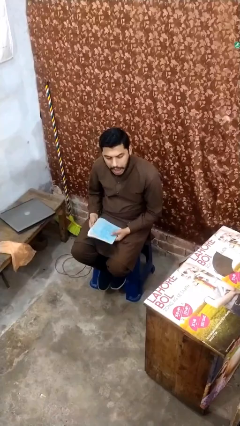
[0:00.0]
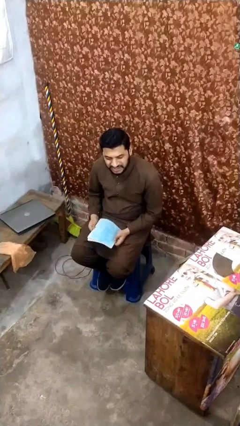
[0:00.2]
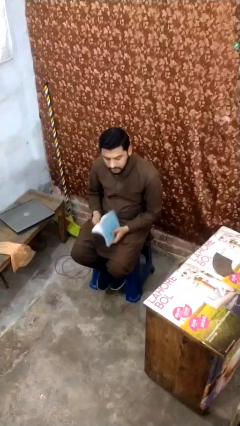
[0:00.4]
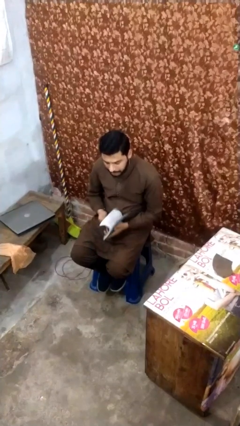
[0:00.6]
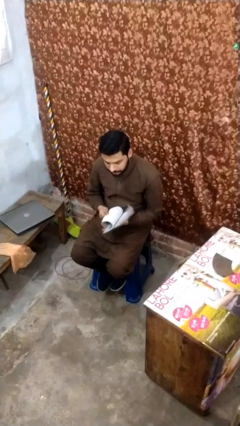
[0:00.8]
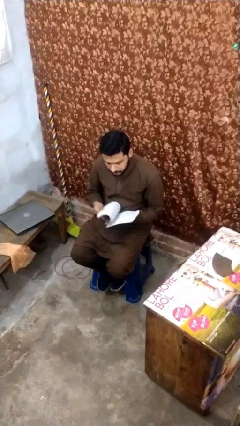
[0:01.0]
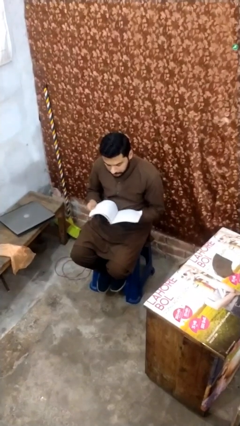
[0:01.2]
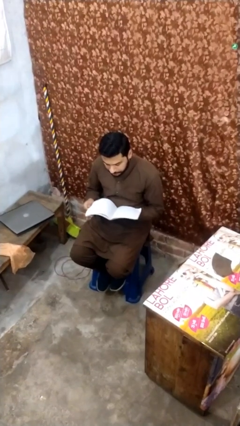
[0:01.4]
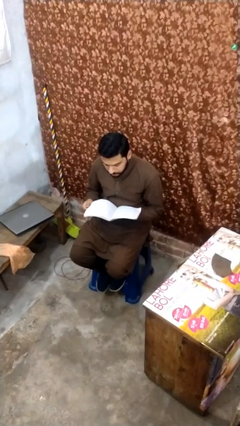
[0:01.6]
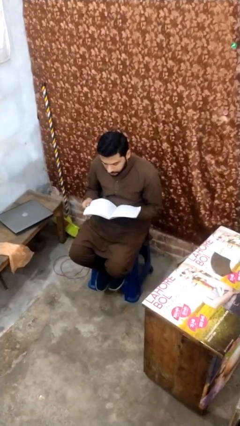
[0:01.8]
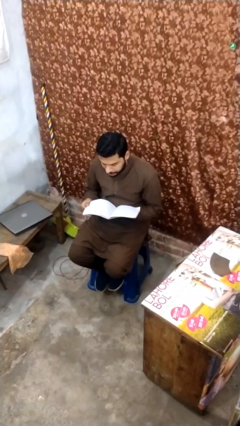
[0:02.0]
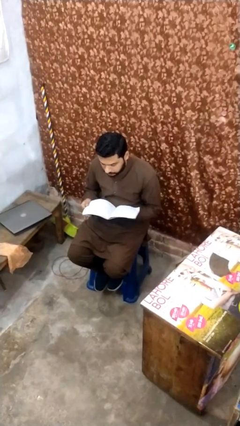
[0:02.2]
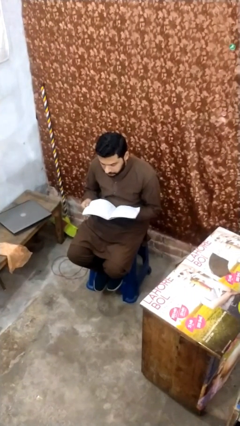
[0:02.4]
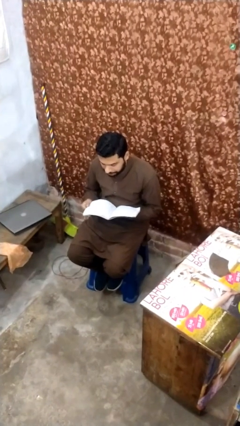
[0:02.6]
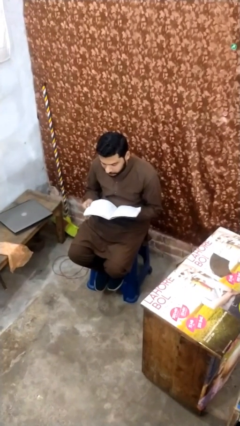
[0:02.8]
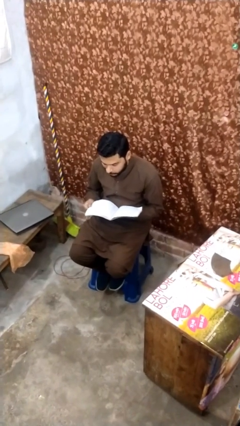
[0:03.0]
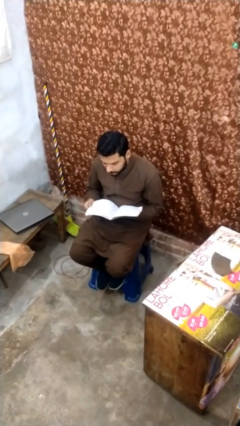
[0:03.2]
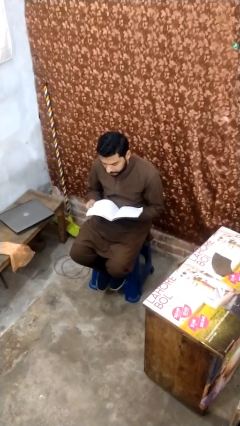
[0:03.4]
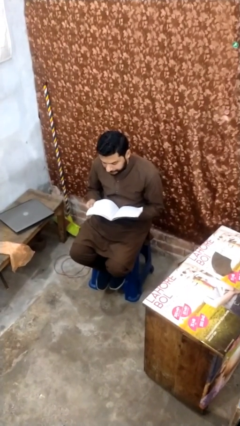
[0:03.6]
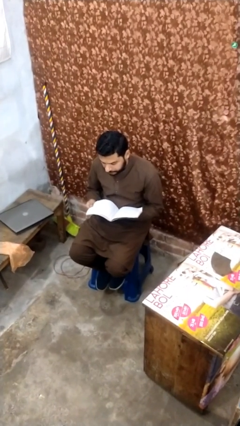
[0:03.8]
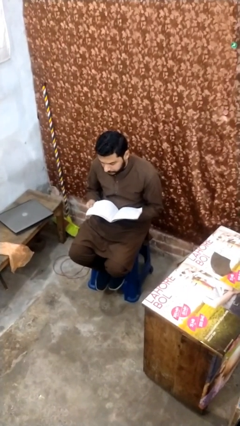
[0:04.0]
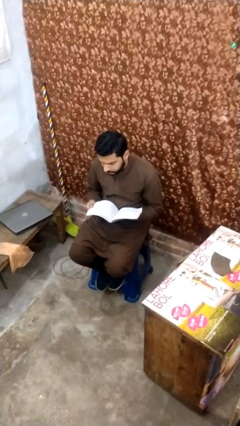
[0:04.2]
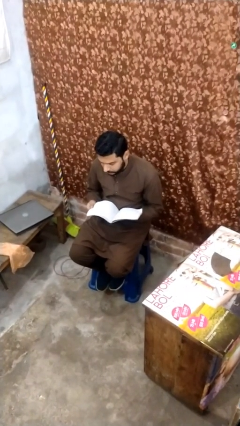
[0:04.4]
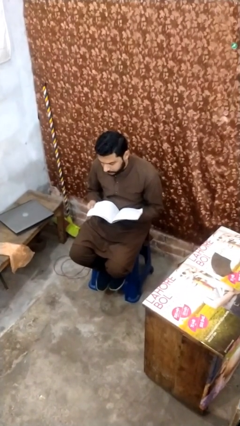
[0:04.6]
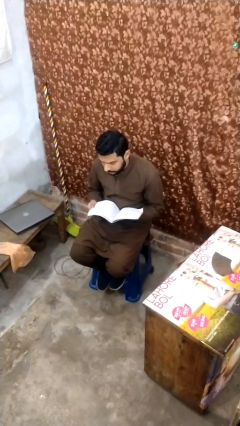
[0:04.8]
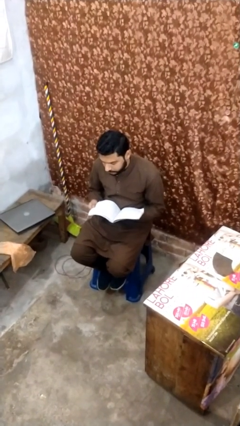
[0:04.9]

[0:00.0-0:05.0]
person reads document

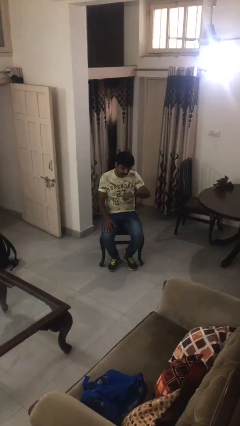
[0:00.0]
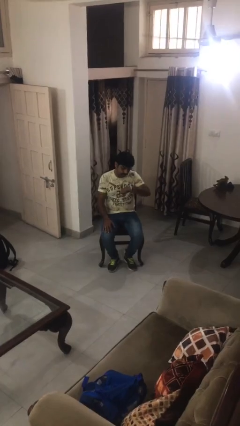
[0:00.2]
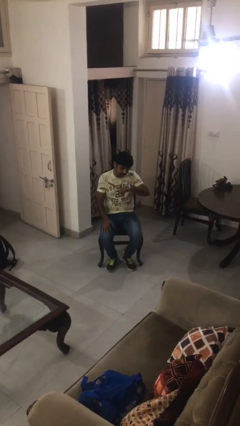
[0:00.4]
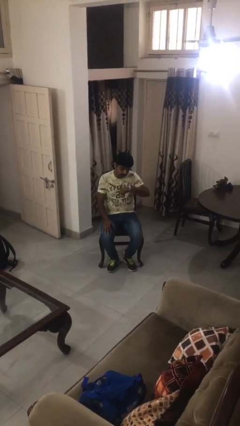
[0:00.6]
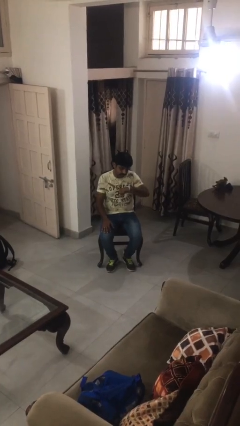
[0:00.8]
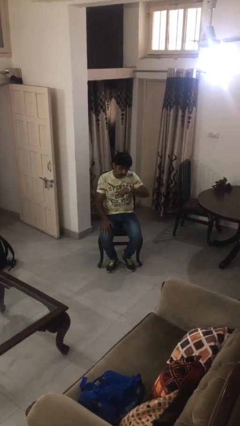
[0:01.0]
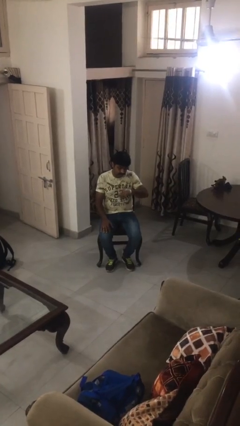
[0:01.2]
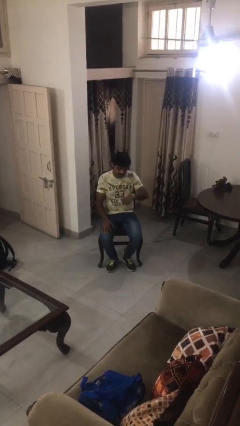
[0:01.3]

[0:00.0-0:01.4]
person looks at wristwatch

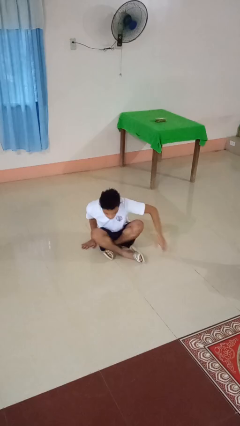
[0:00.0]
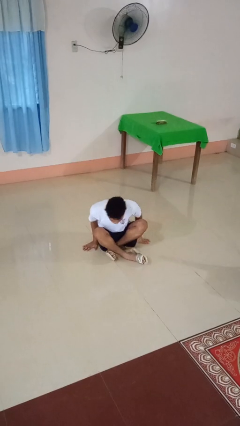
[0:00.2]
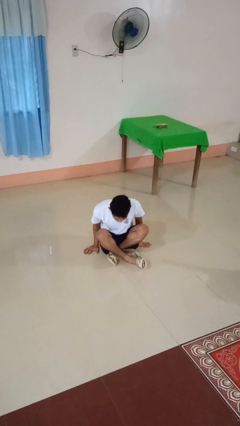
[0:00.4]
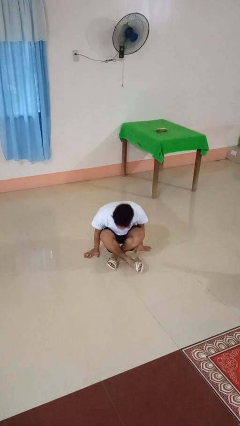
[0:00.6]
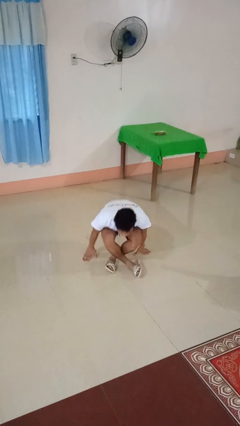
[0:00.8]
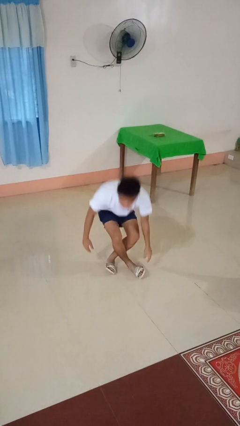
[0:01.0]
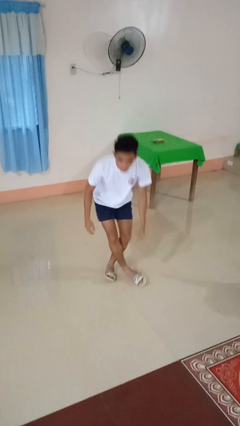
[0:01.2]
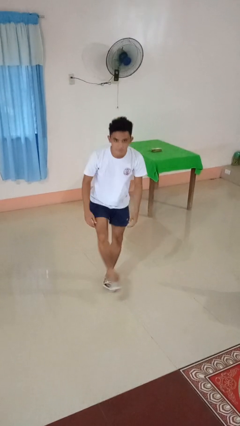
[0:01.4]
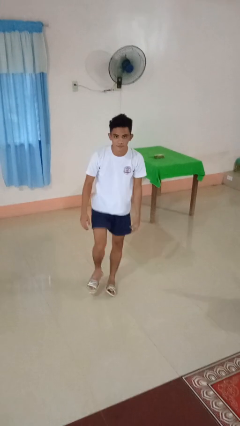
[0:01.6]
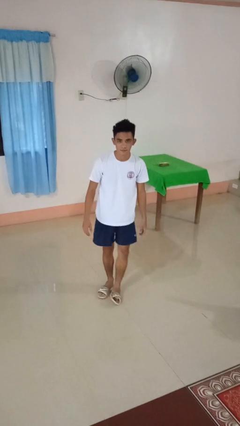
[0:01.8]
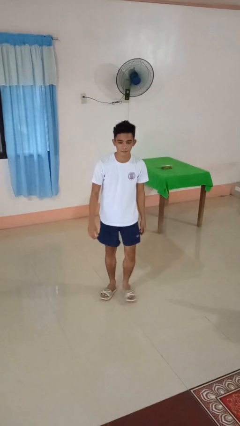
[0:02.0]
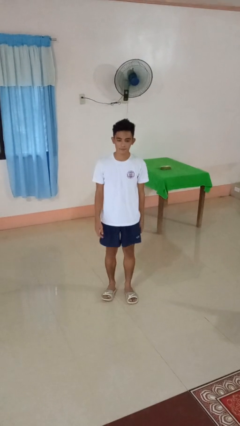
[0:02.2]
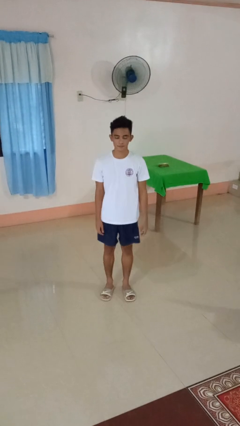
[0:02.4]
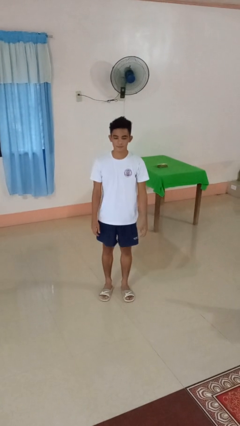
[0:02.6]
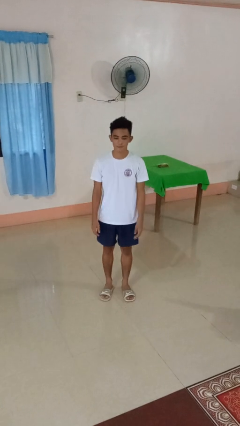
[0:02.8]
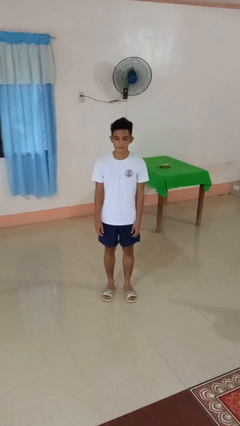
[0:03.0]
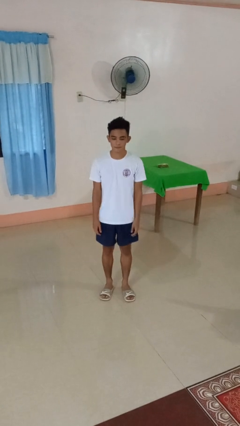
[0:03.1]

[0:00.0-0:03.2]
person stands up from floor

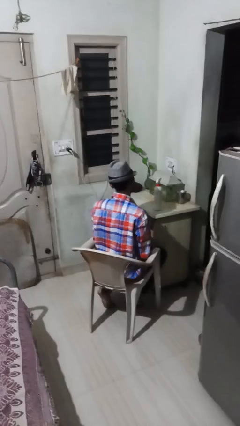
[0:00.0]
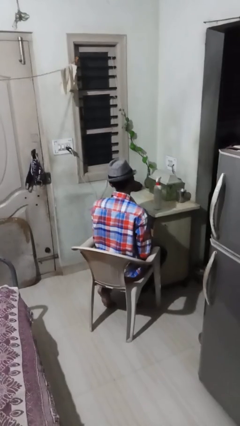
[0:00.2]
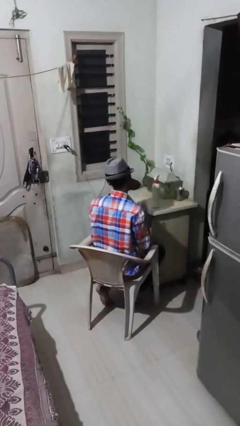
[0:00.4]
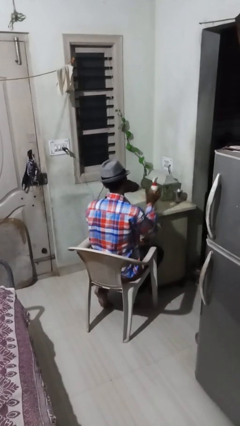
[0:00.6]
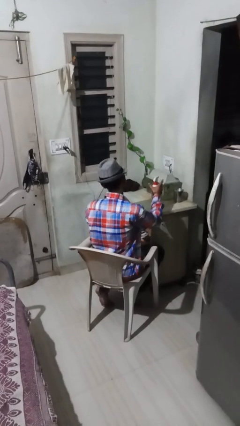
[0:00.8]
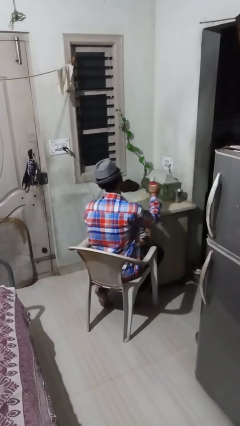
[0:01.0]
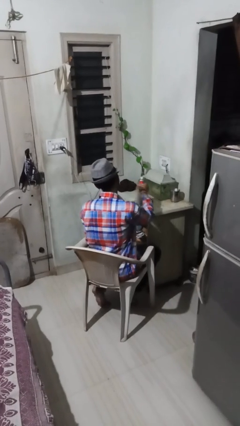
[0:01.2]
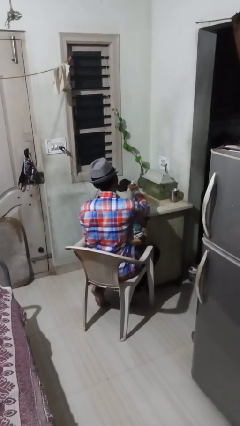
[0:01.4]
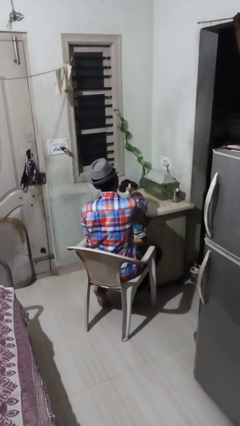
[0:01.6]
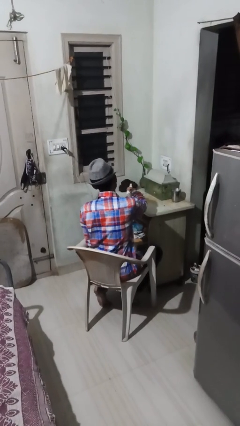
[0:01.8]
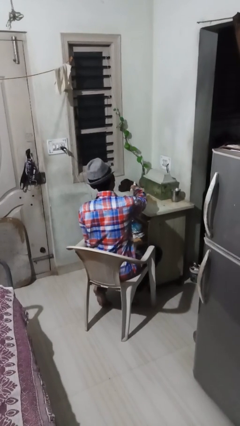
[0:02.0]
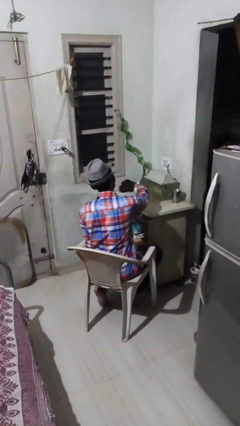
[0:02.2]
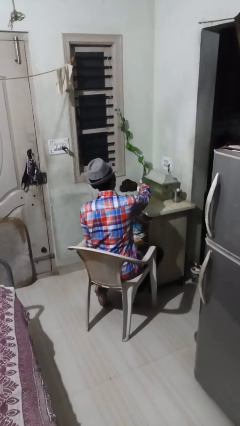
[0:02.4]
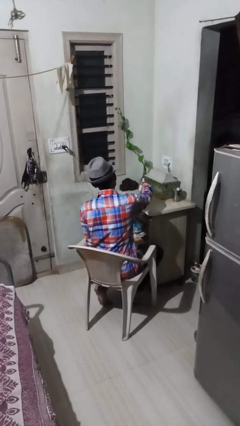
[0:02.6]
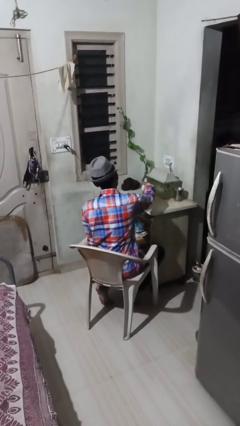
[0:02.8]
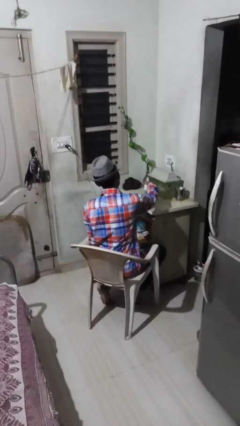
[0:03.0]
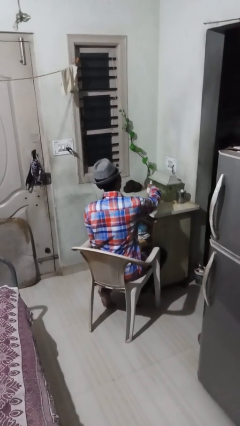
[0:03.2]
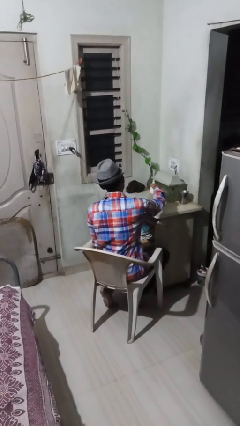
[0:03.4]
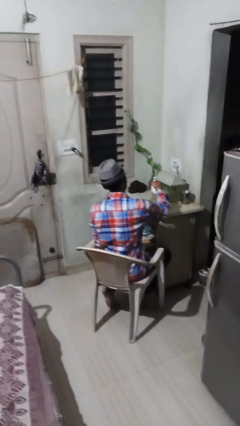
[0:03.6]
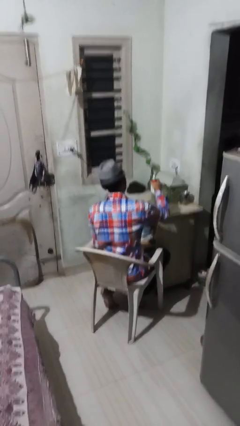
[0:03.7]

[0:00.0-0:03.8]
person sprays from bottle

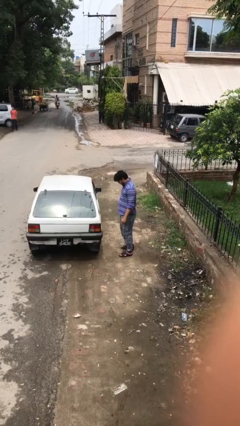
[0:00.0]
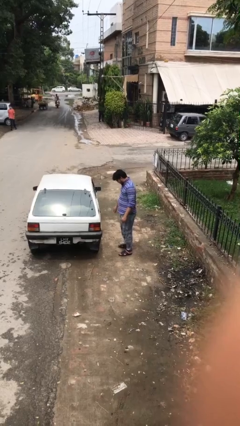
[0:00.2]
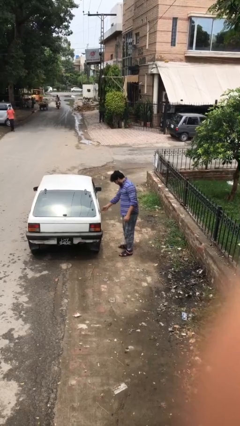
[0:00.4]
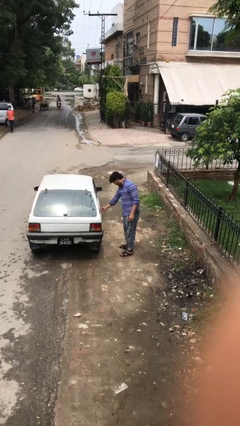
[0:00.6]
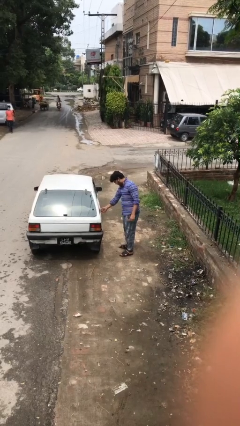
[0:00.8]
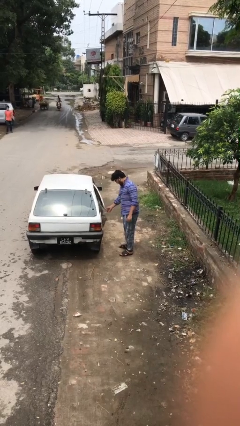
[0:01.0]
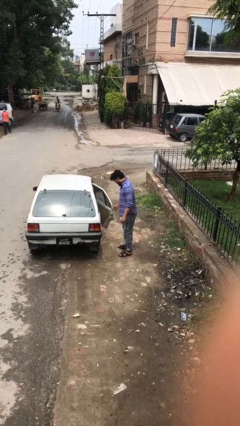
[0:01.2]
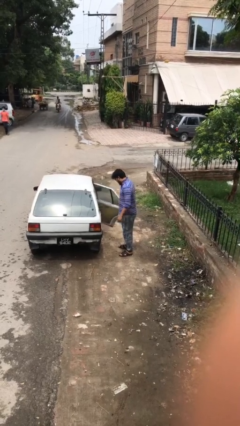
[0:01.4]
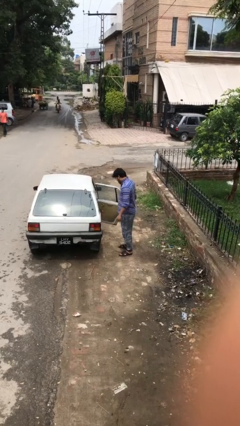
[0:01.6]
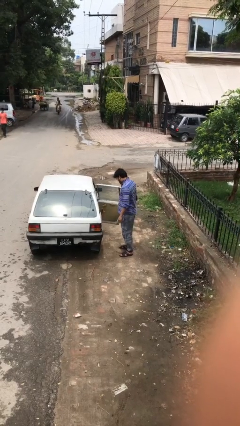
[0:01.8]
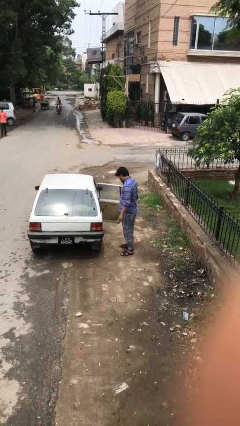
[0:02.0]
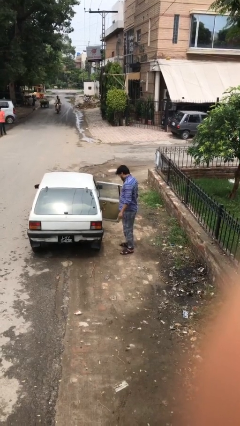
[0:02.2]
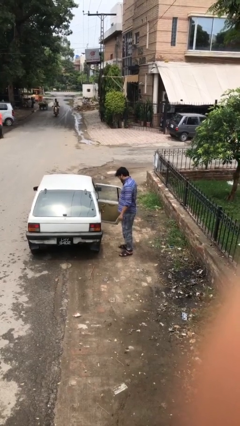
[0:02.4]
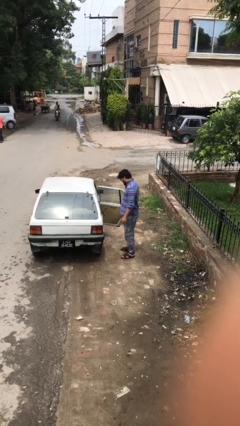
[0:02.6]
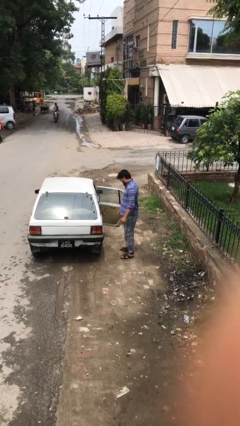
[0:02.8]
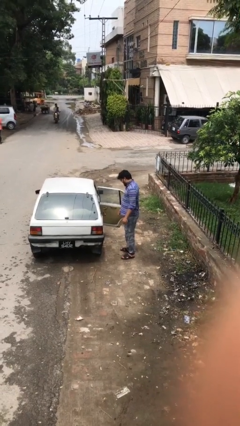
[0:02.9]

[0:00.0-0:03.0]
person opens car door

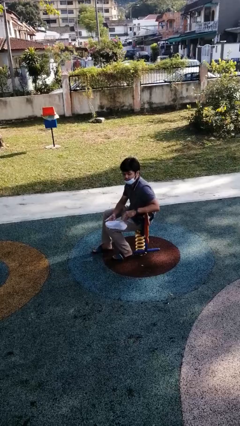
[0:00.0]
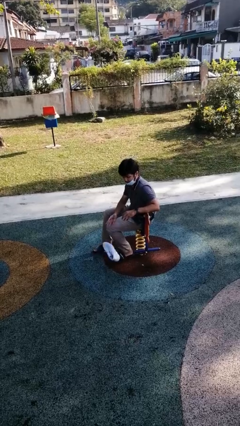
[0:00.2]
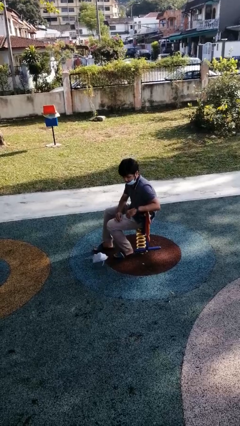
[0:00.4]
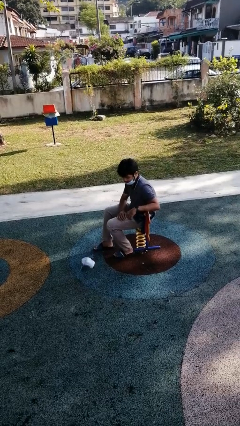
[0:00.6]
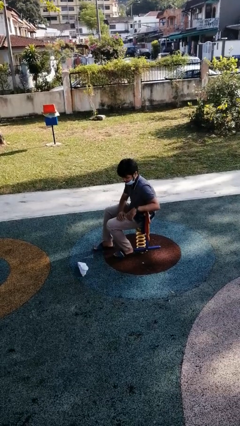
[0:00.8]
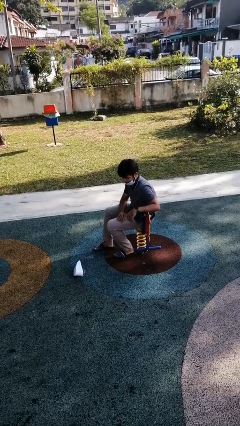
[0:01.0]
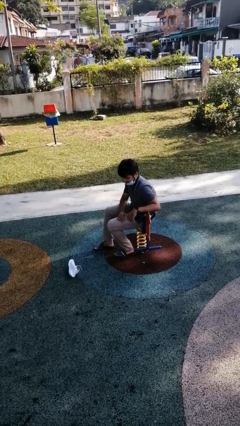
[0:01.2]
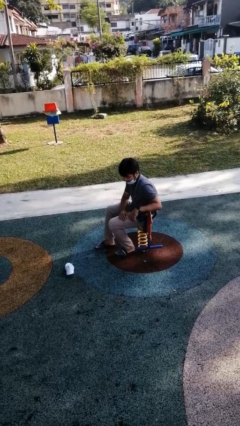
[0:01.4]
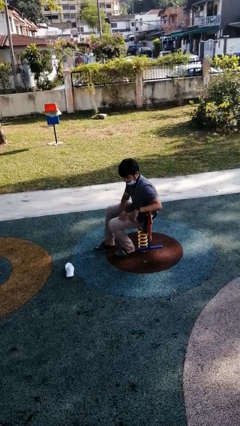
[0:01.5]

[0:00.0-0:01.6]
person drops object
